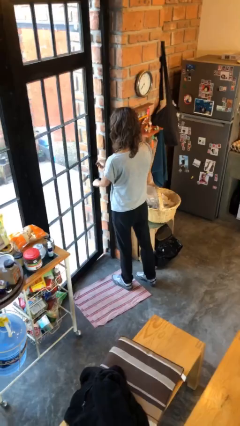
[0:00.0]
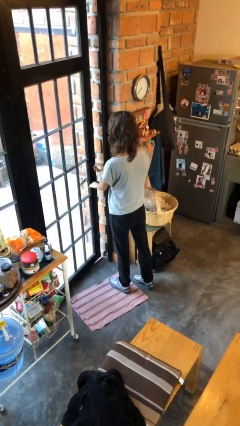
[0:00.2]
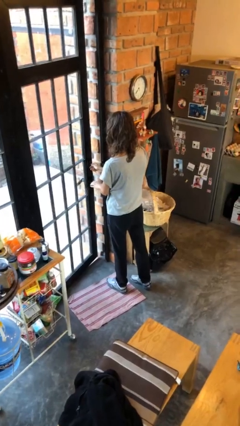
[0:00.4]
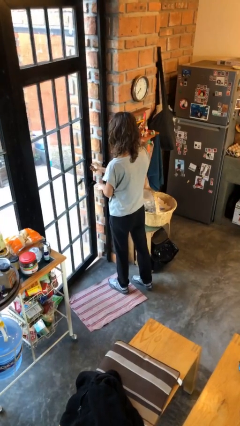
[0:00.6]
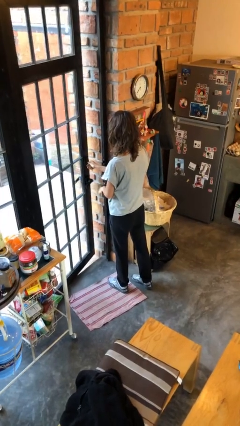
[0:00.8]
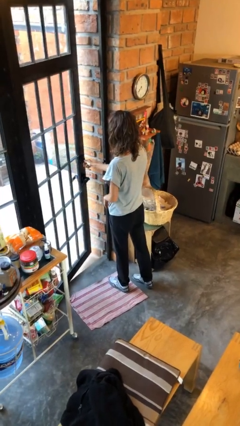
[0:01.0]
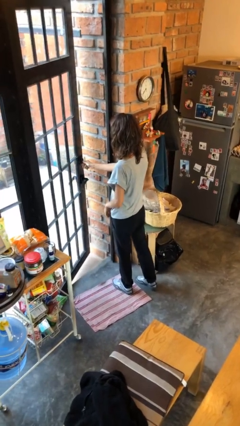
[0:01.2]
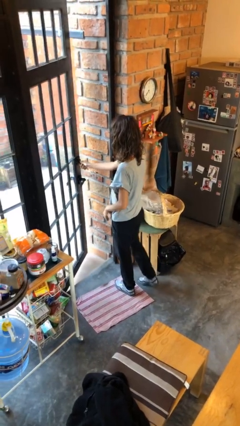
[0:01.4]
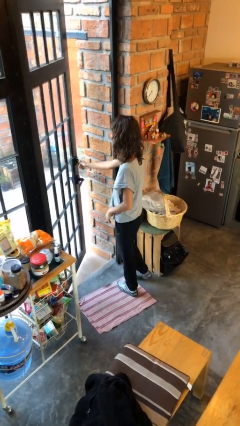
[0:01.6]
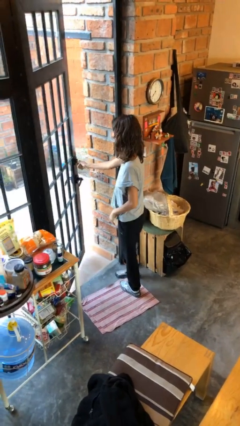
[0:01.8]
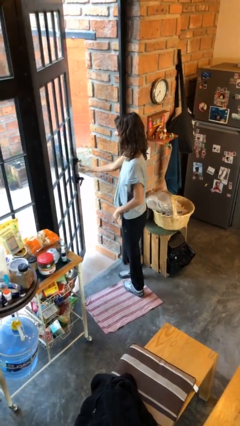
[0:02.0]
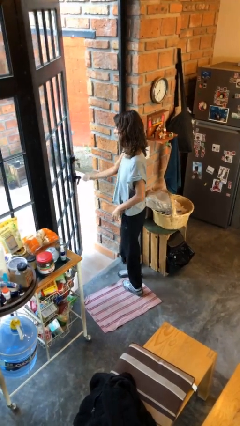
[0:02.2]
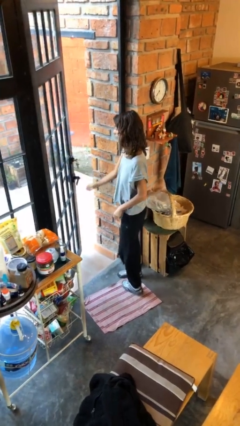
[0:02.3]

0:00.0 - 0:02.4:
person opens facility door

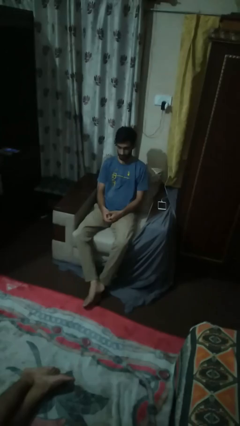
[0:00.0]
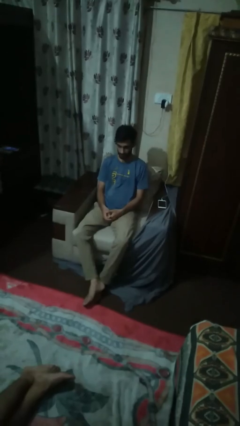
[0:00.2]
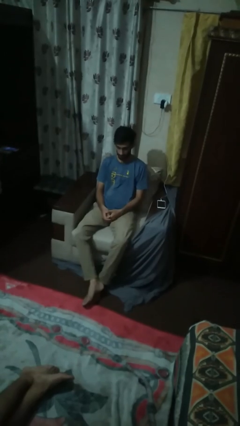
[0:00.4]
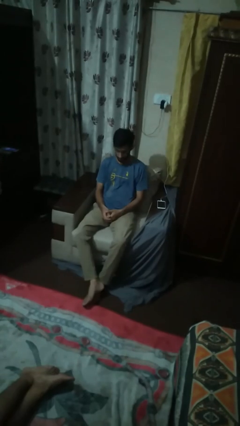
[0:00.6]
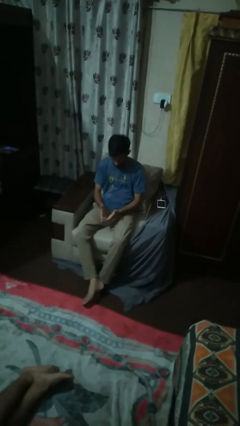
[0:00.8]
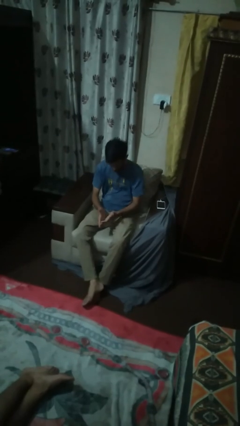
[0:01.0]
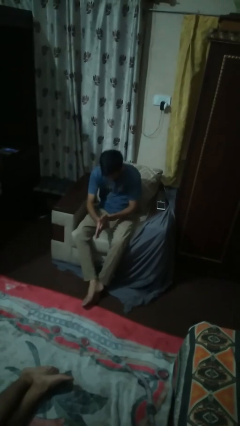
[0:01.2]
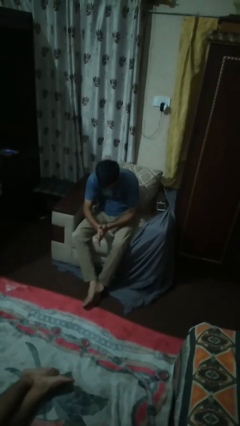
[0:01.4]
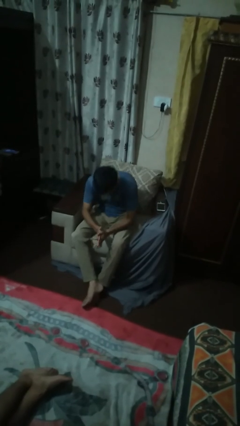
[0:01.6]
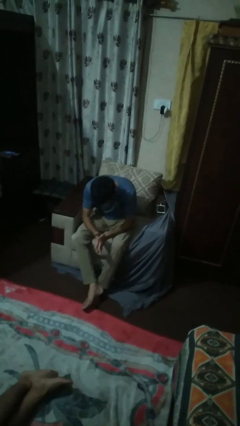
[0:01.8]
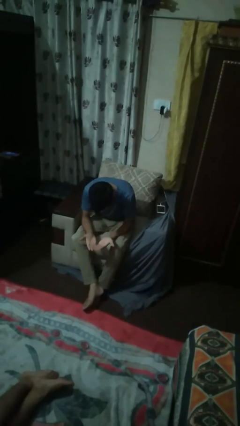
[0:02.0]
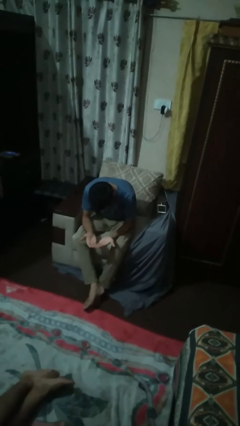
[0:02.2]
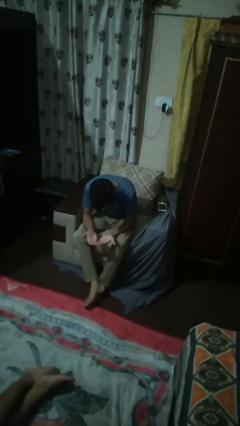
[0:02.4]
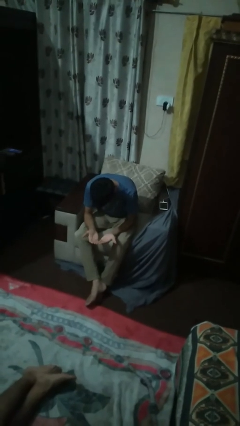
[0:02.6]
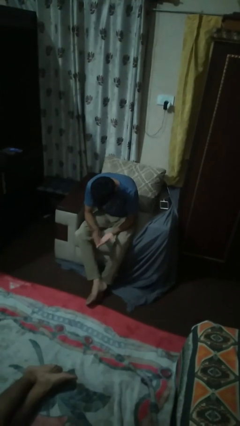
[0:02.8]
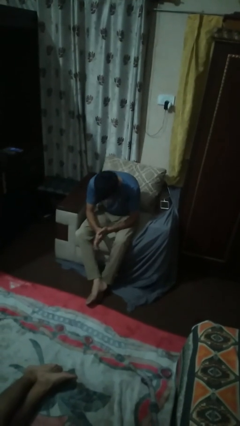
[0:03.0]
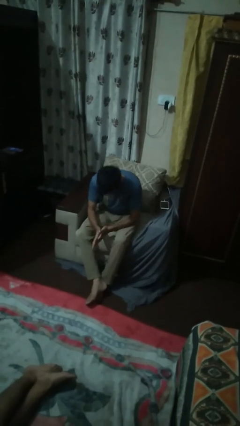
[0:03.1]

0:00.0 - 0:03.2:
person looks at hands in lap

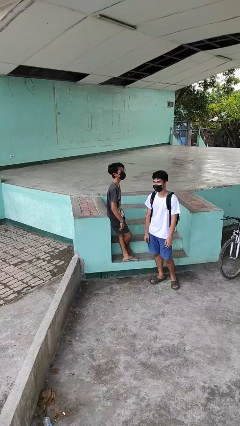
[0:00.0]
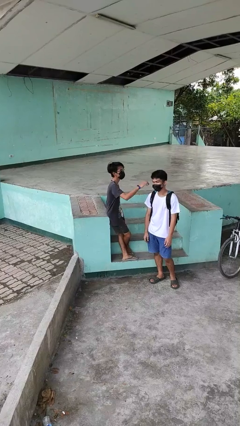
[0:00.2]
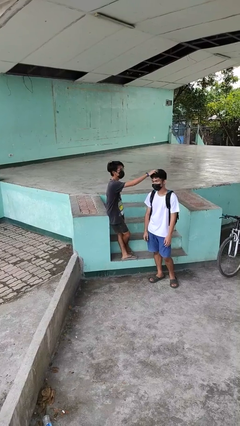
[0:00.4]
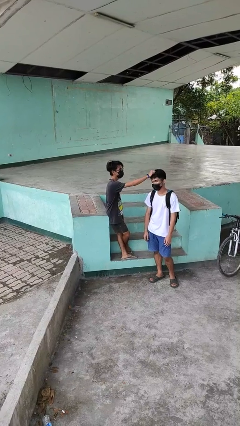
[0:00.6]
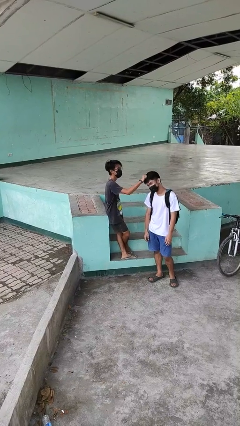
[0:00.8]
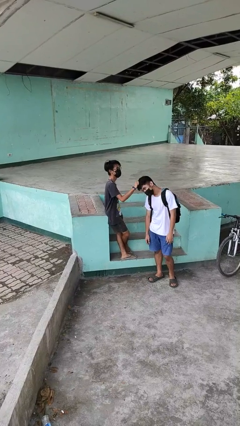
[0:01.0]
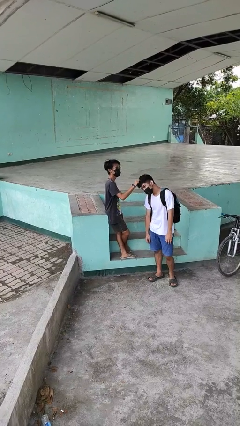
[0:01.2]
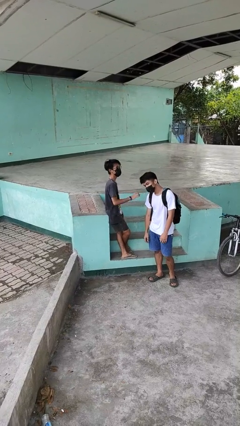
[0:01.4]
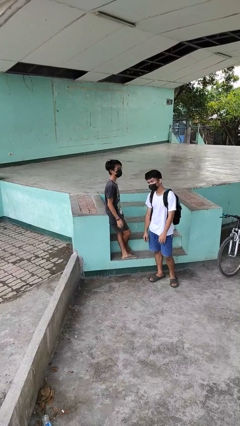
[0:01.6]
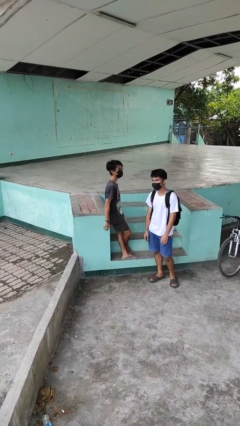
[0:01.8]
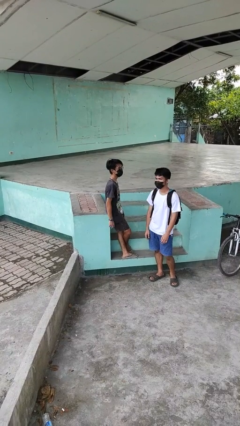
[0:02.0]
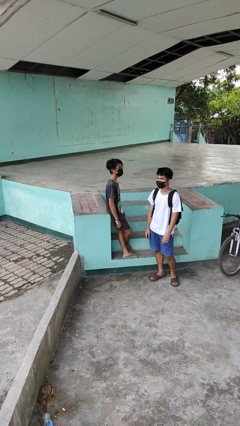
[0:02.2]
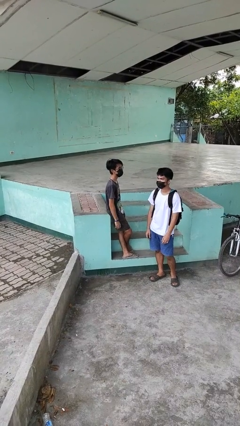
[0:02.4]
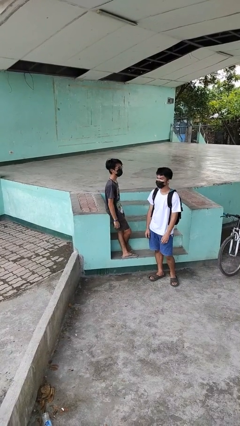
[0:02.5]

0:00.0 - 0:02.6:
person grabs person by hair

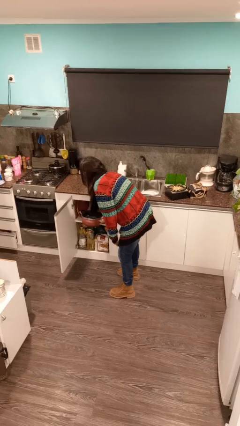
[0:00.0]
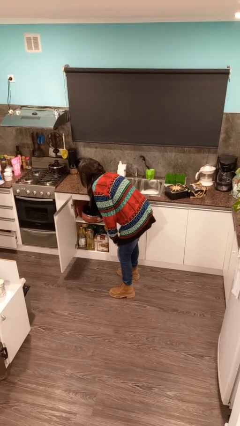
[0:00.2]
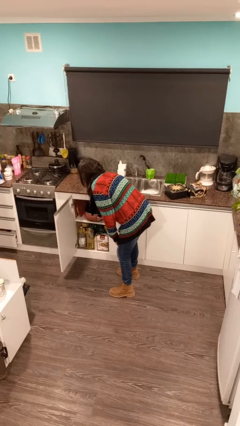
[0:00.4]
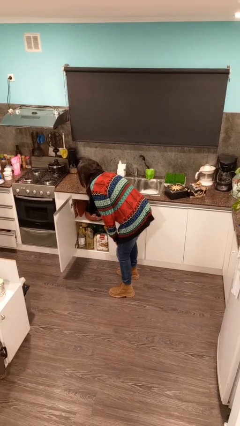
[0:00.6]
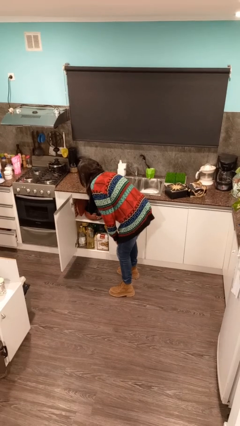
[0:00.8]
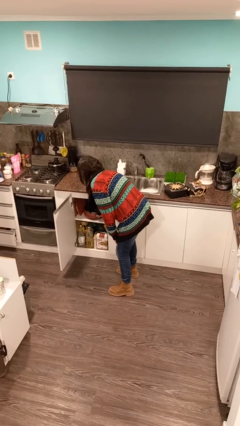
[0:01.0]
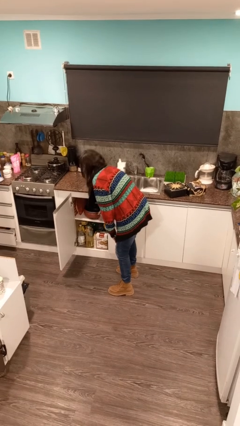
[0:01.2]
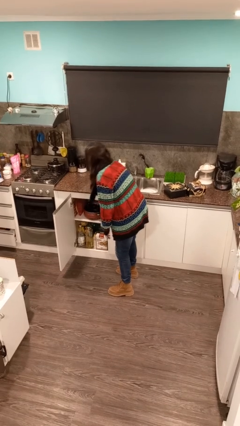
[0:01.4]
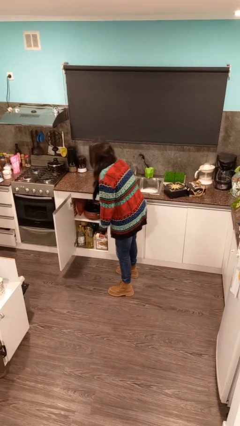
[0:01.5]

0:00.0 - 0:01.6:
person puts down object into cabinet

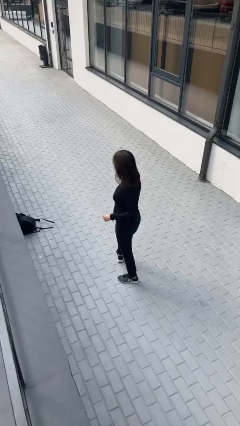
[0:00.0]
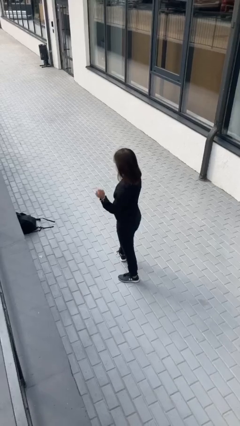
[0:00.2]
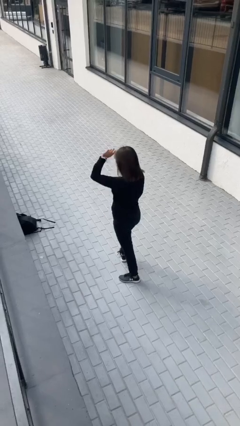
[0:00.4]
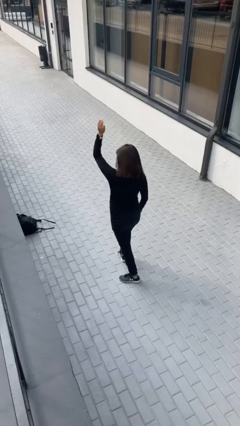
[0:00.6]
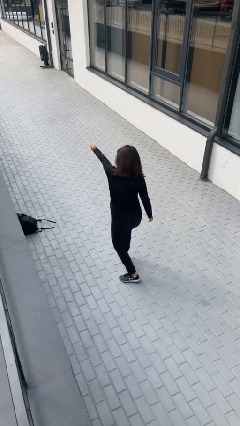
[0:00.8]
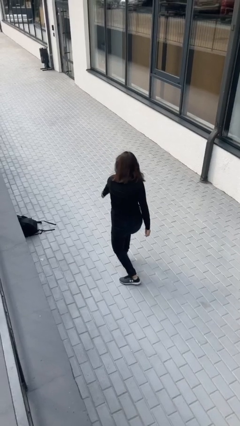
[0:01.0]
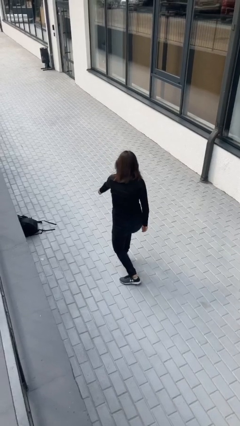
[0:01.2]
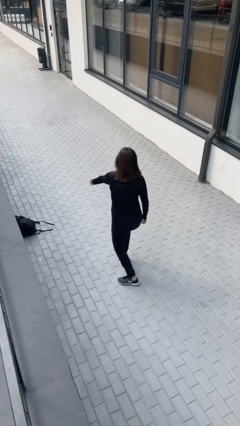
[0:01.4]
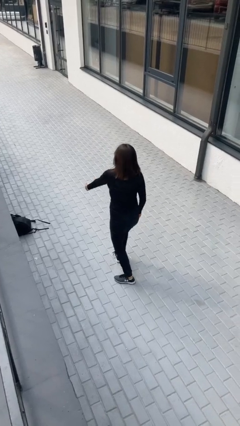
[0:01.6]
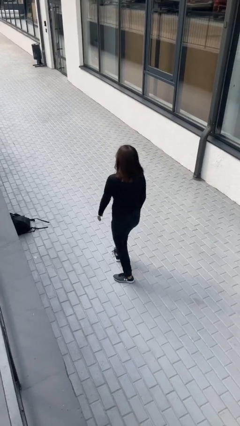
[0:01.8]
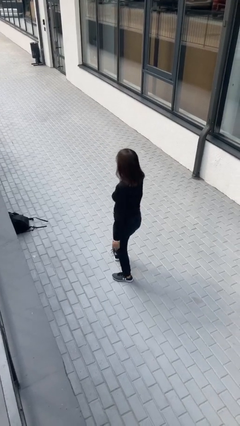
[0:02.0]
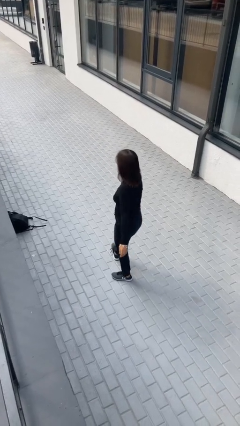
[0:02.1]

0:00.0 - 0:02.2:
person karate chop

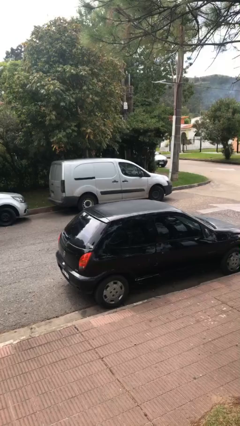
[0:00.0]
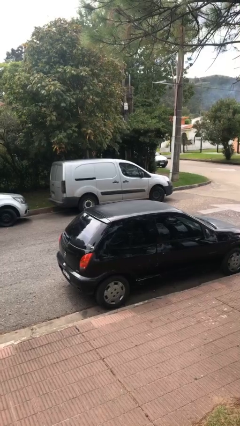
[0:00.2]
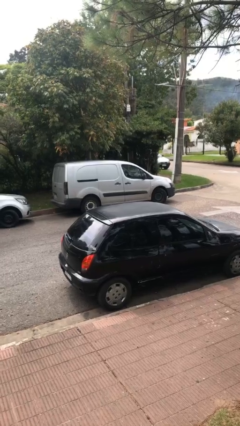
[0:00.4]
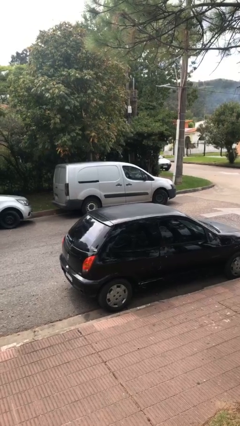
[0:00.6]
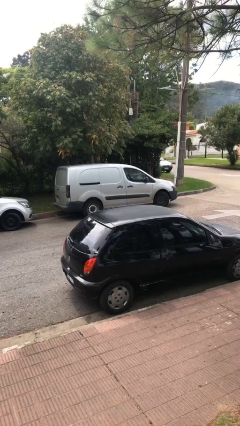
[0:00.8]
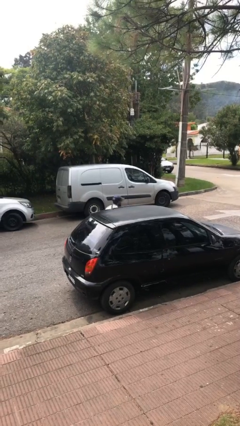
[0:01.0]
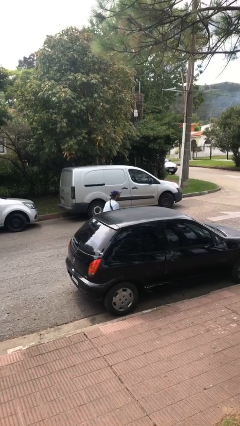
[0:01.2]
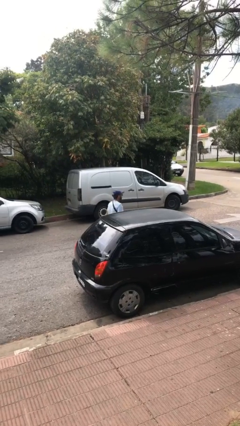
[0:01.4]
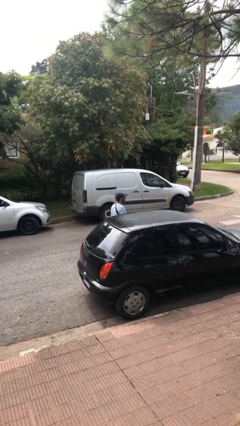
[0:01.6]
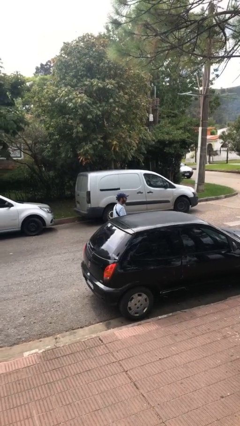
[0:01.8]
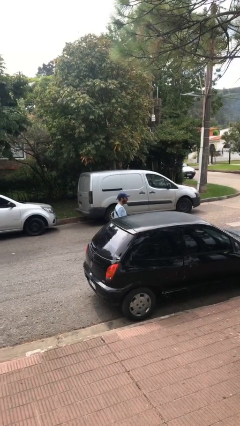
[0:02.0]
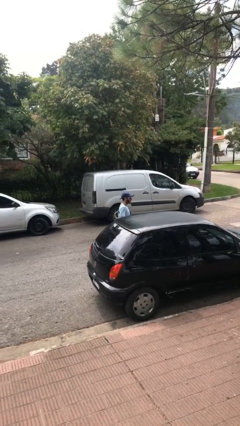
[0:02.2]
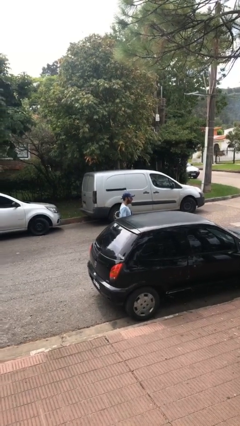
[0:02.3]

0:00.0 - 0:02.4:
person exits car

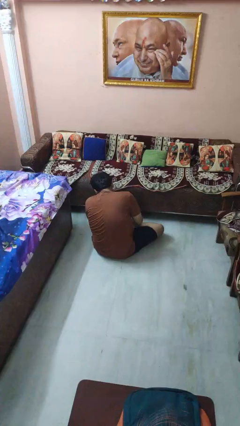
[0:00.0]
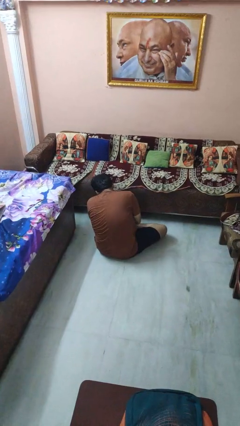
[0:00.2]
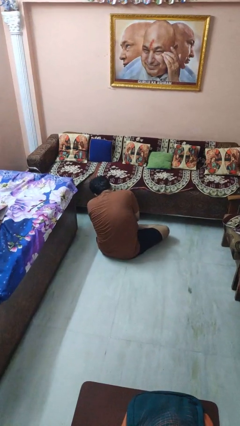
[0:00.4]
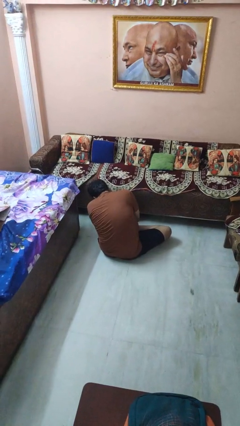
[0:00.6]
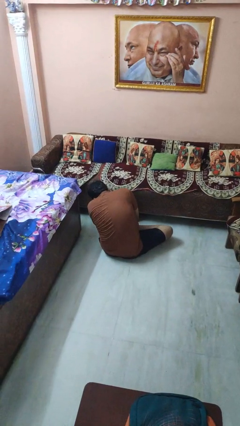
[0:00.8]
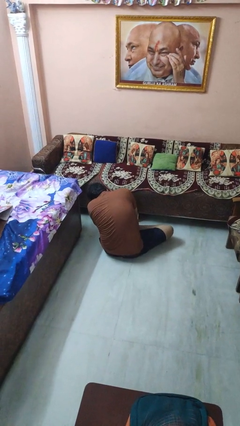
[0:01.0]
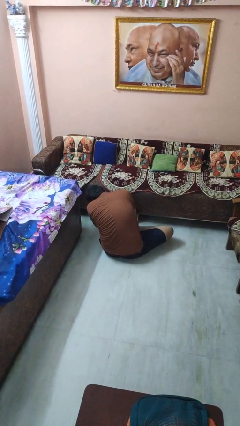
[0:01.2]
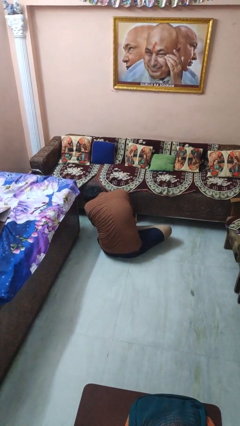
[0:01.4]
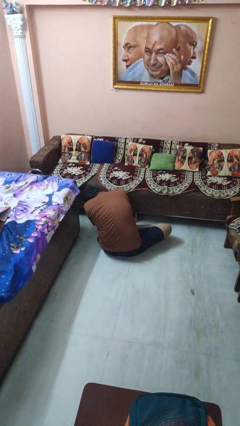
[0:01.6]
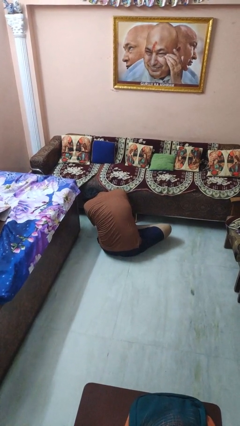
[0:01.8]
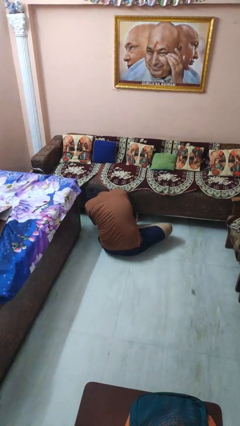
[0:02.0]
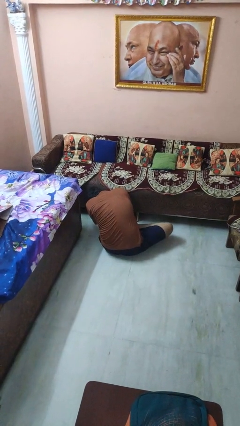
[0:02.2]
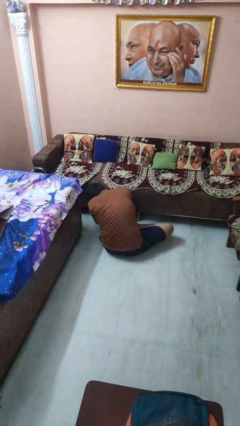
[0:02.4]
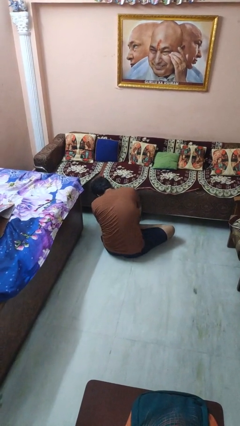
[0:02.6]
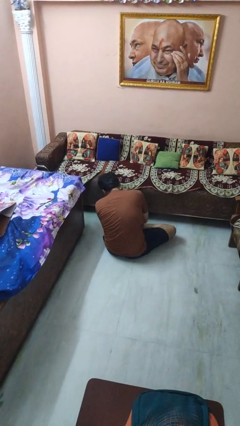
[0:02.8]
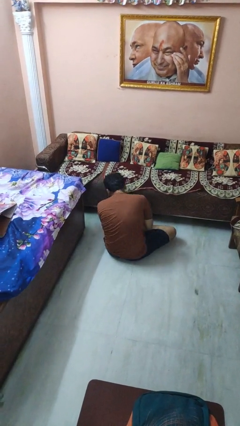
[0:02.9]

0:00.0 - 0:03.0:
person searches under couch
